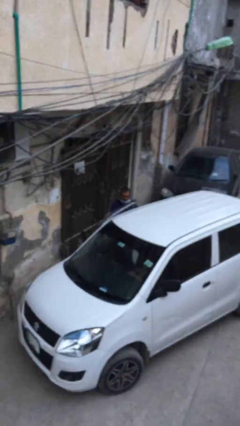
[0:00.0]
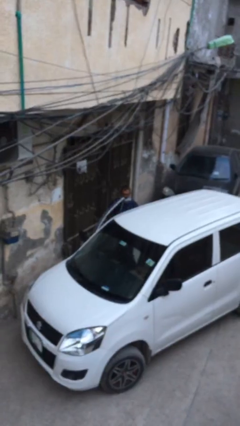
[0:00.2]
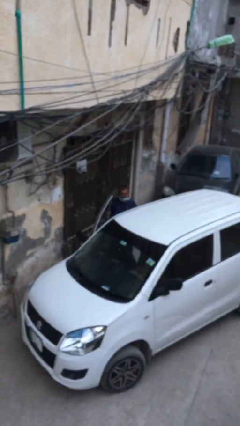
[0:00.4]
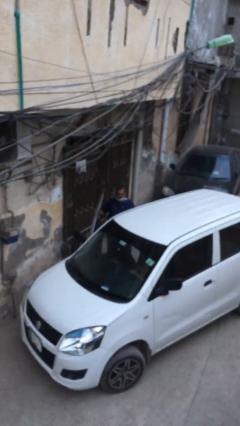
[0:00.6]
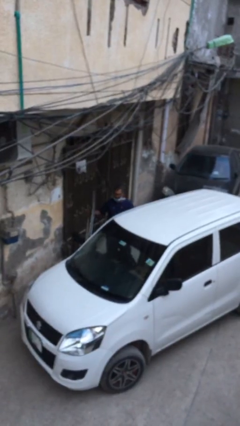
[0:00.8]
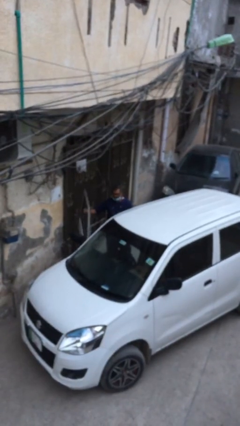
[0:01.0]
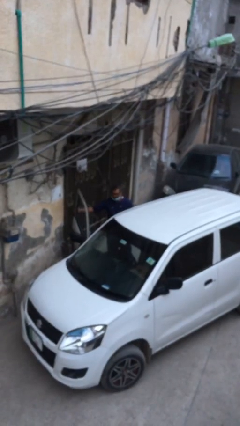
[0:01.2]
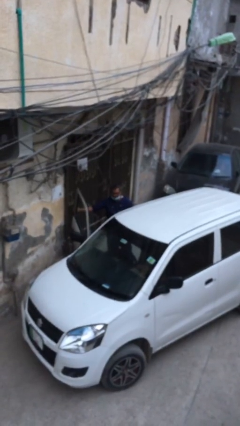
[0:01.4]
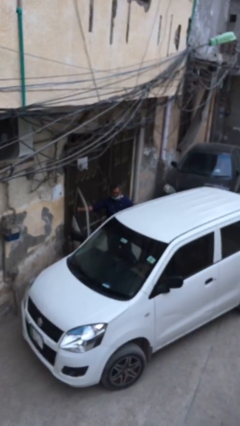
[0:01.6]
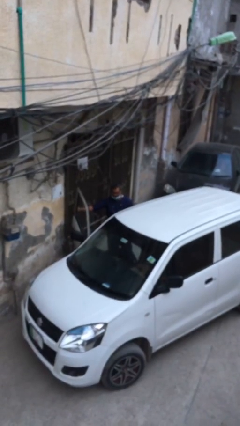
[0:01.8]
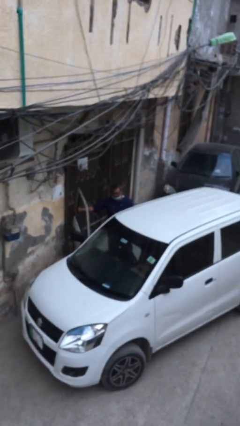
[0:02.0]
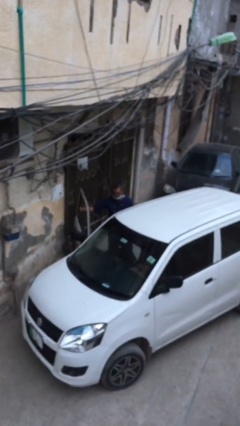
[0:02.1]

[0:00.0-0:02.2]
person opens car door

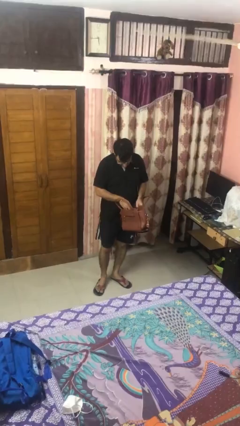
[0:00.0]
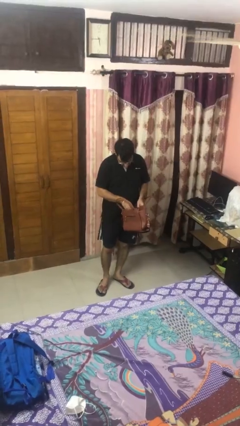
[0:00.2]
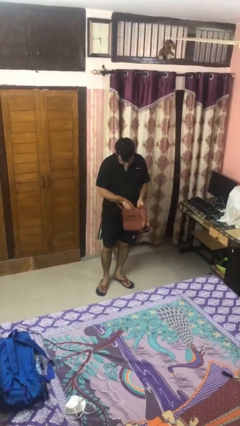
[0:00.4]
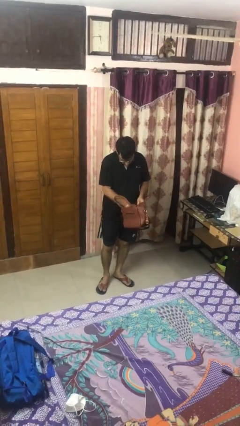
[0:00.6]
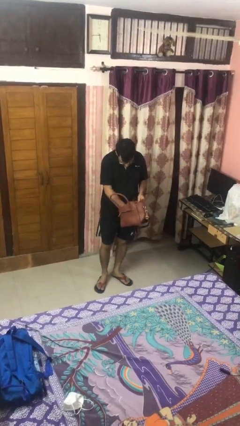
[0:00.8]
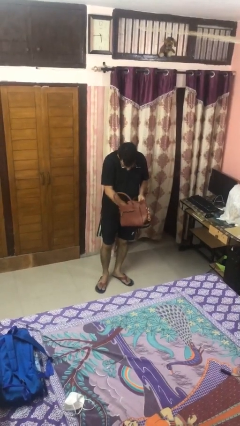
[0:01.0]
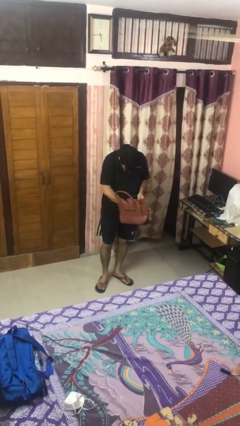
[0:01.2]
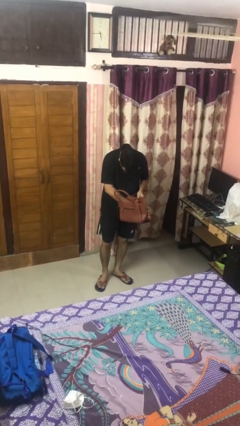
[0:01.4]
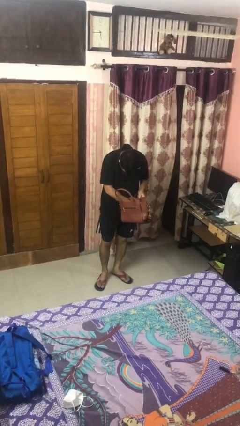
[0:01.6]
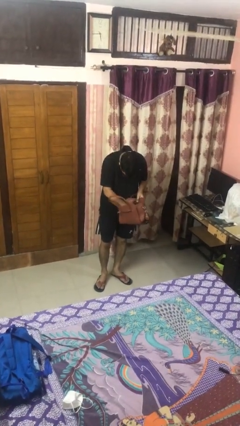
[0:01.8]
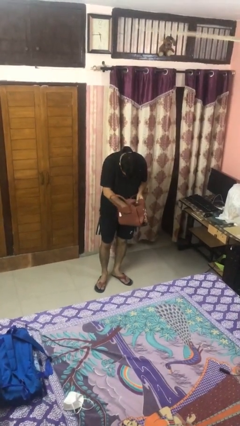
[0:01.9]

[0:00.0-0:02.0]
person searches in purse

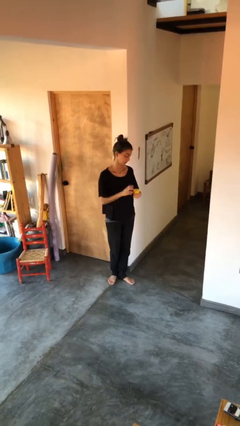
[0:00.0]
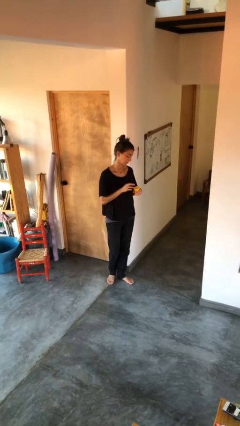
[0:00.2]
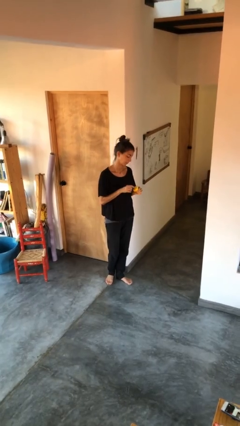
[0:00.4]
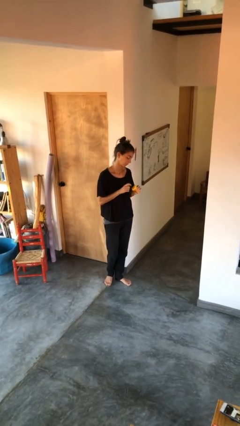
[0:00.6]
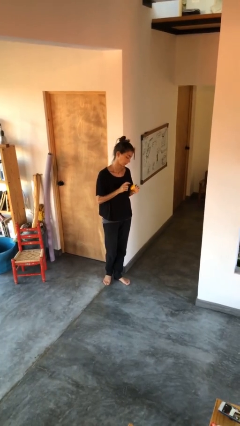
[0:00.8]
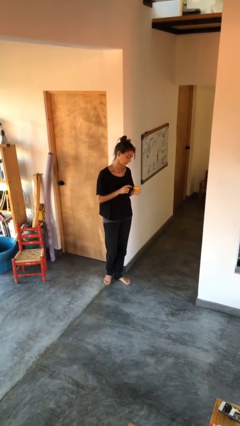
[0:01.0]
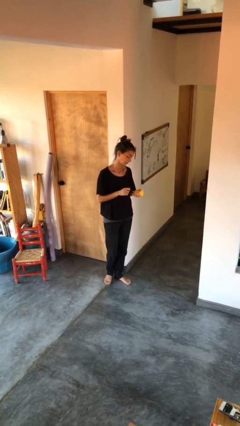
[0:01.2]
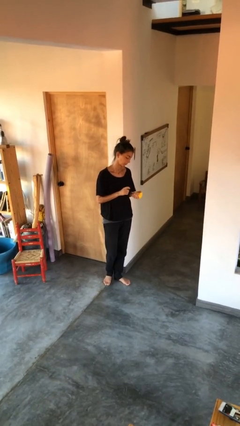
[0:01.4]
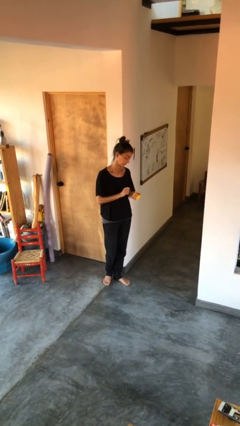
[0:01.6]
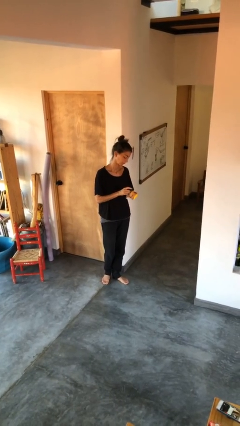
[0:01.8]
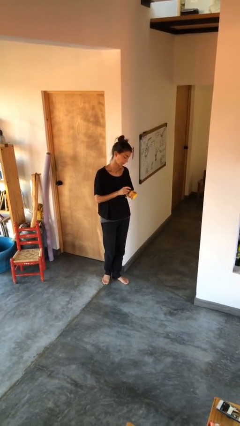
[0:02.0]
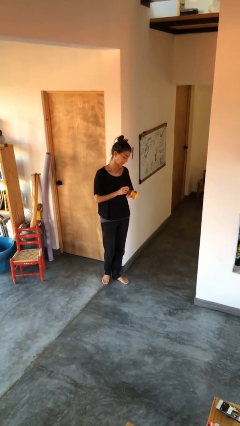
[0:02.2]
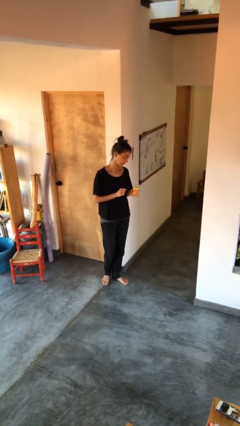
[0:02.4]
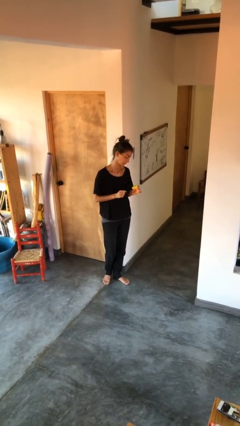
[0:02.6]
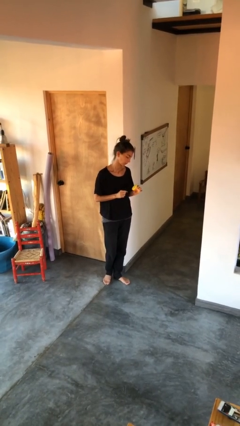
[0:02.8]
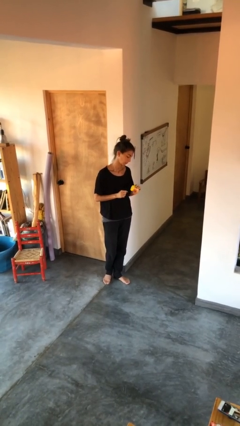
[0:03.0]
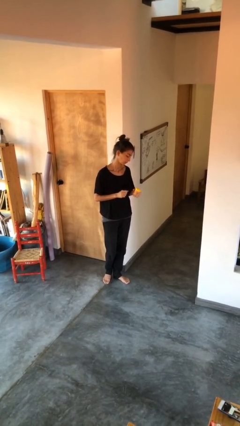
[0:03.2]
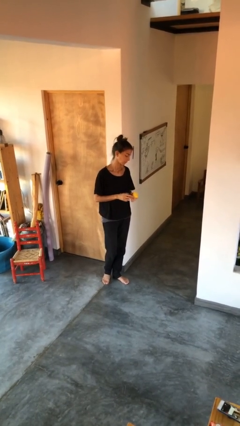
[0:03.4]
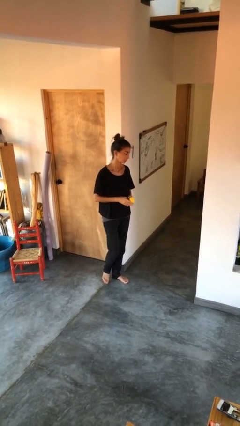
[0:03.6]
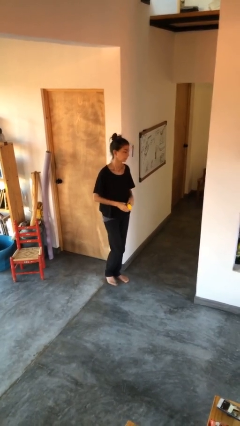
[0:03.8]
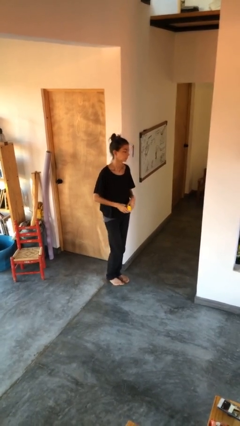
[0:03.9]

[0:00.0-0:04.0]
person taps object with finger

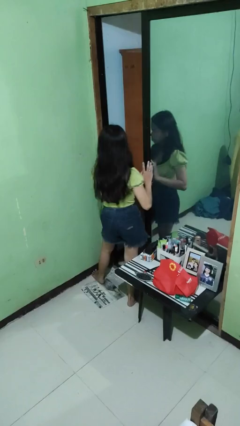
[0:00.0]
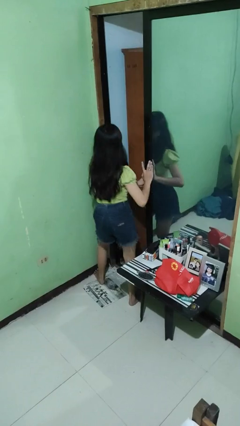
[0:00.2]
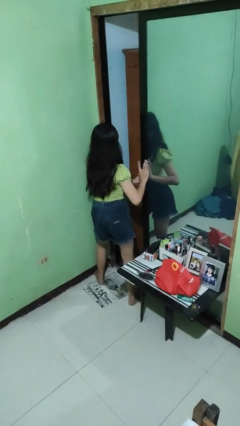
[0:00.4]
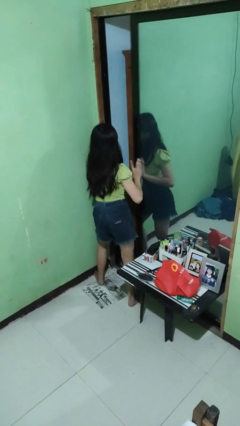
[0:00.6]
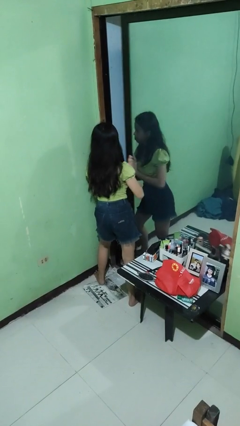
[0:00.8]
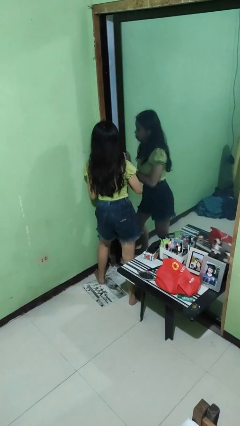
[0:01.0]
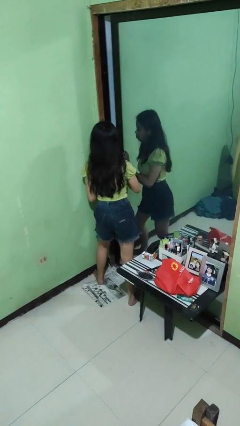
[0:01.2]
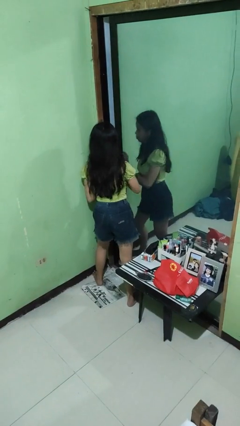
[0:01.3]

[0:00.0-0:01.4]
person closes sliding door

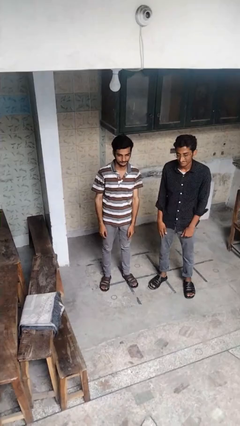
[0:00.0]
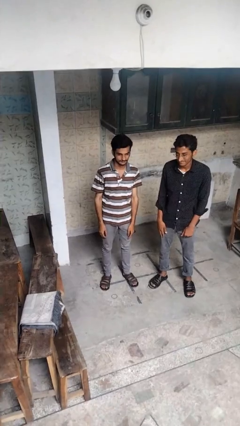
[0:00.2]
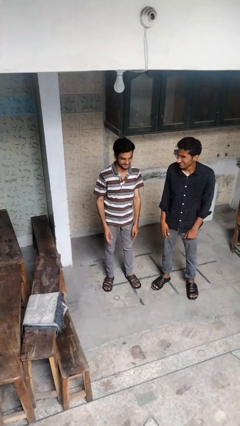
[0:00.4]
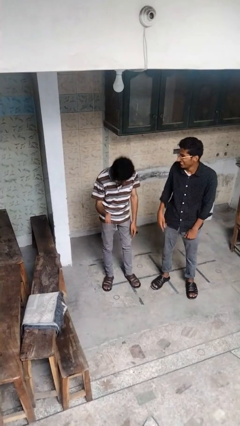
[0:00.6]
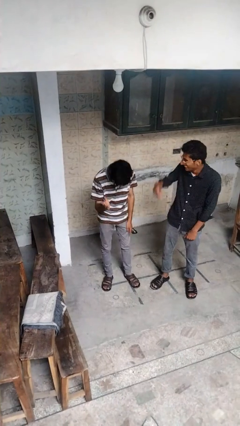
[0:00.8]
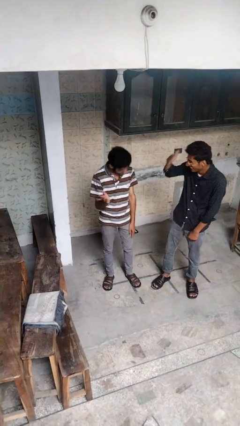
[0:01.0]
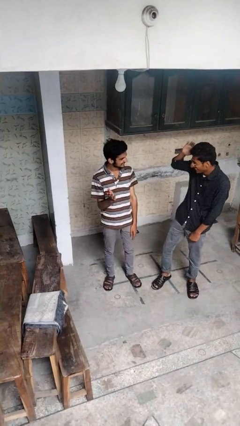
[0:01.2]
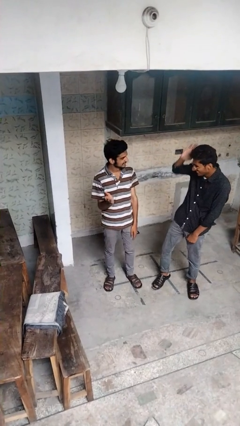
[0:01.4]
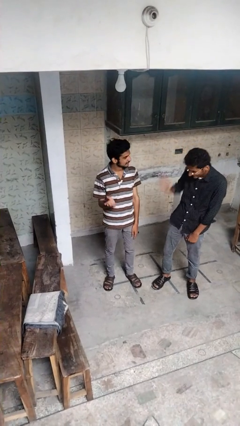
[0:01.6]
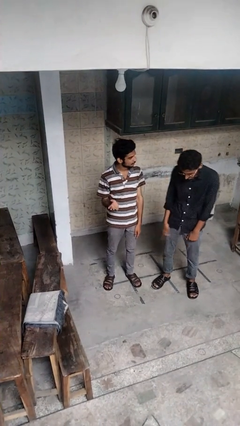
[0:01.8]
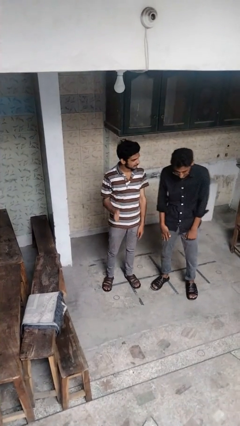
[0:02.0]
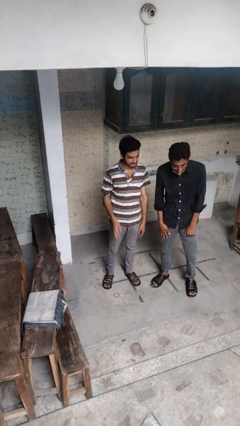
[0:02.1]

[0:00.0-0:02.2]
person laughs with person

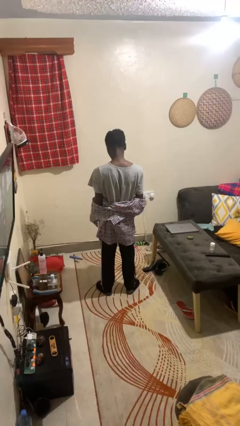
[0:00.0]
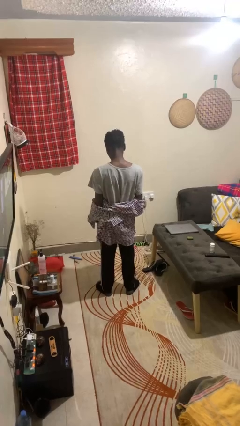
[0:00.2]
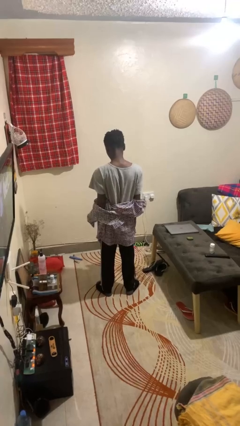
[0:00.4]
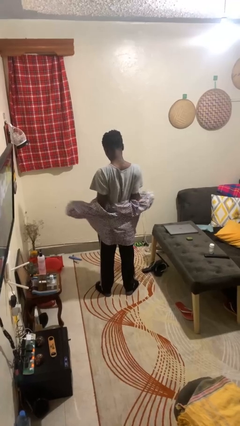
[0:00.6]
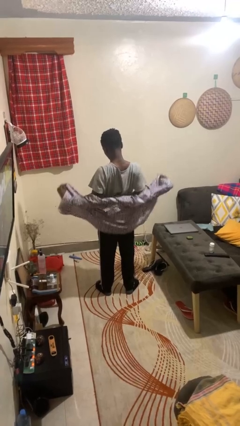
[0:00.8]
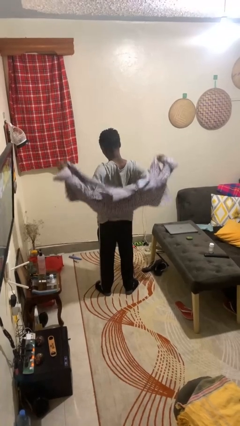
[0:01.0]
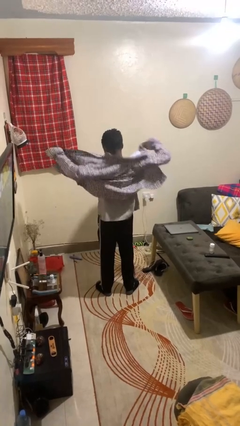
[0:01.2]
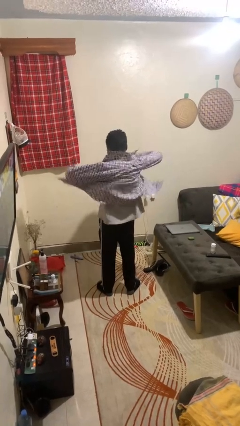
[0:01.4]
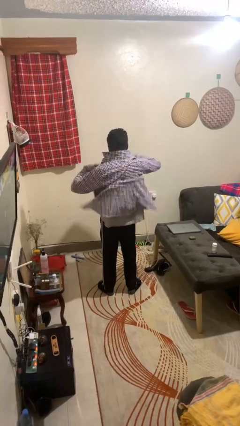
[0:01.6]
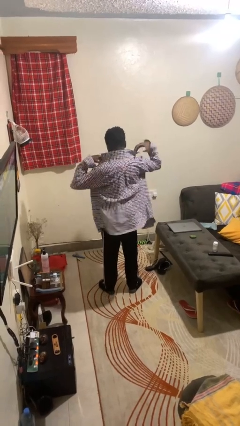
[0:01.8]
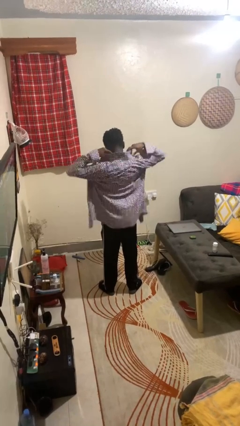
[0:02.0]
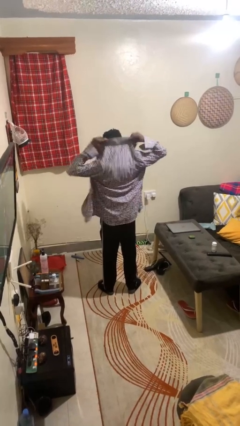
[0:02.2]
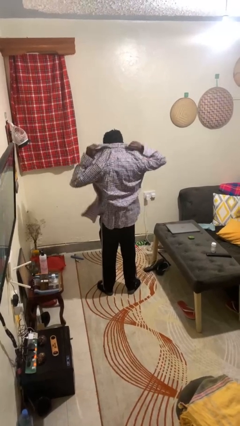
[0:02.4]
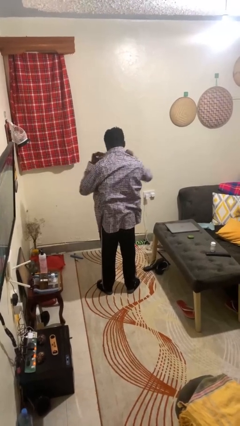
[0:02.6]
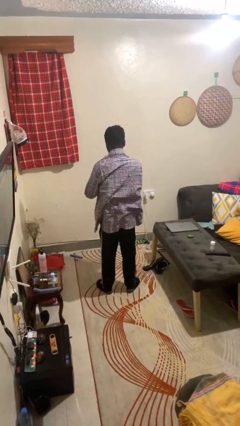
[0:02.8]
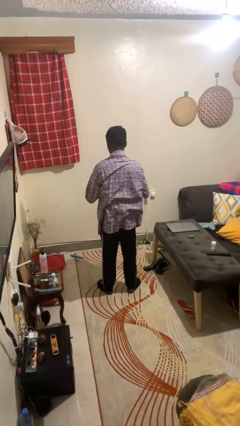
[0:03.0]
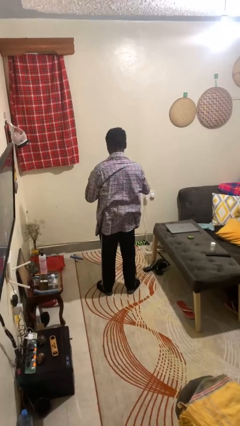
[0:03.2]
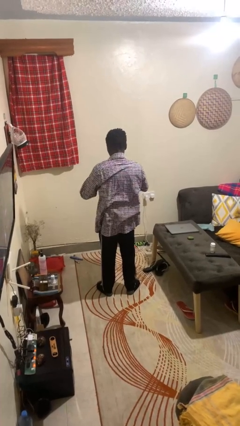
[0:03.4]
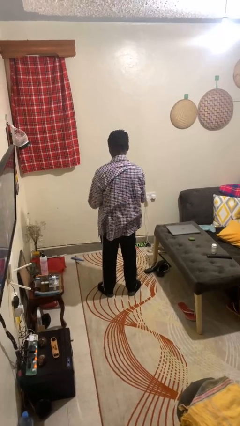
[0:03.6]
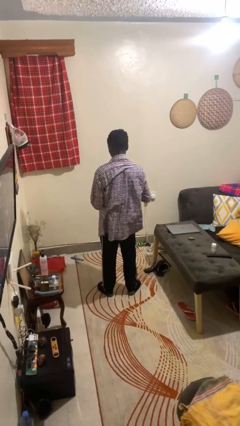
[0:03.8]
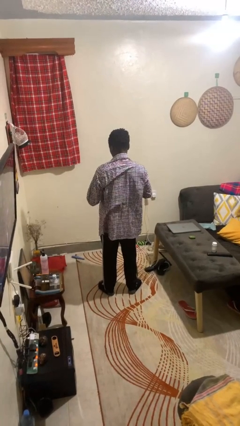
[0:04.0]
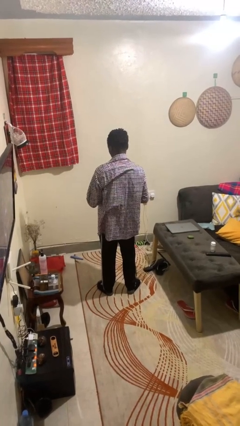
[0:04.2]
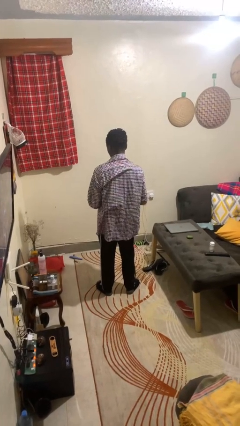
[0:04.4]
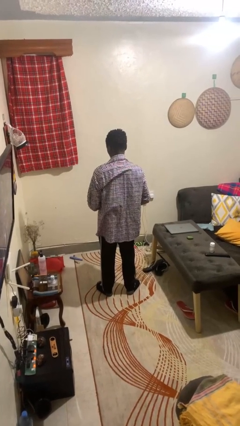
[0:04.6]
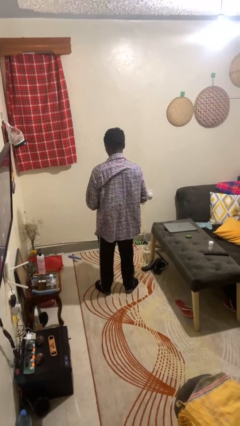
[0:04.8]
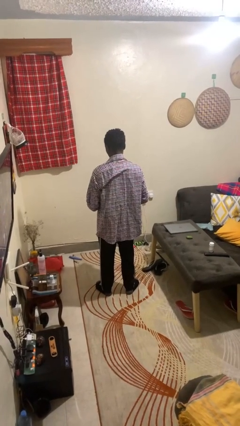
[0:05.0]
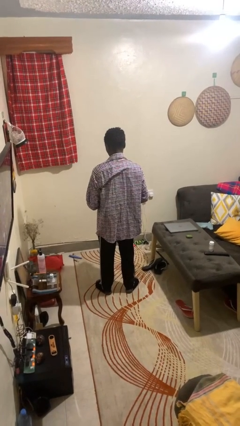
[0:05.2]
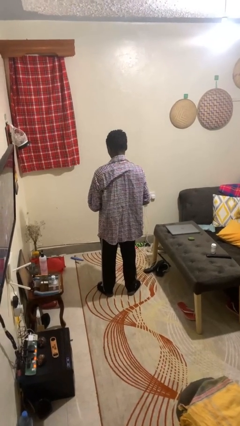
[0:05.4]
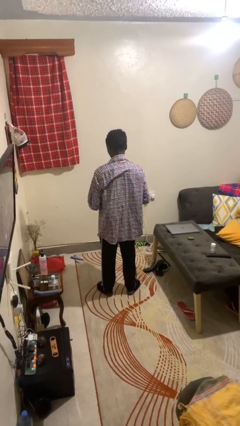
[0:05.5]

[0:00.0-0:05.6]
person puts on shirt
